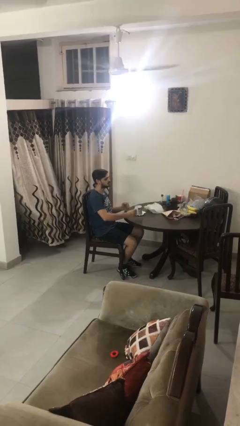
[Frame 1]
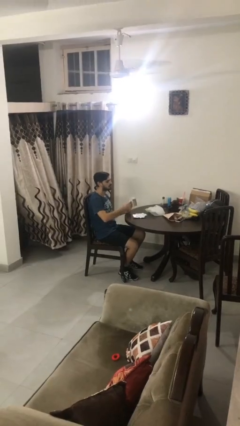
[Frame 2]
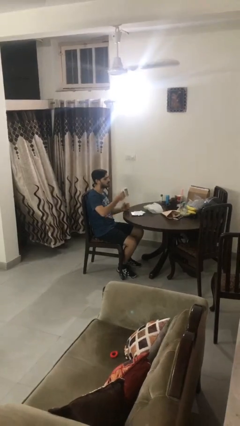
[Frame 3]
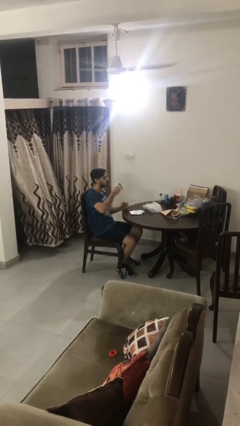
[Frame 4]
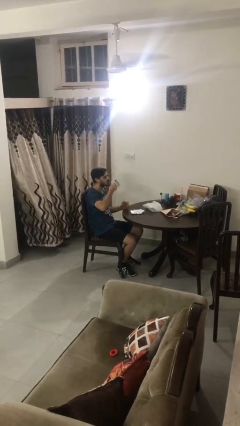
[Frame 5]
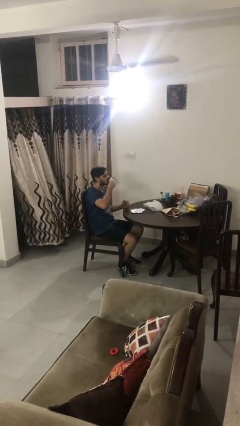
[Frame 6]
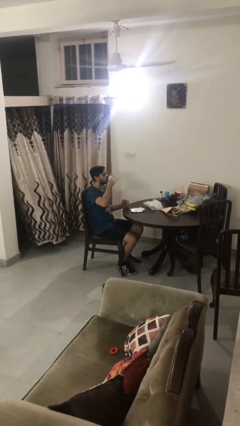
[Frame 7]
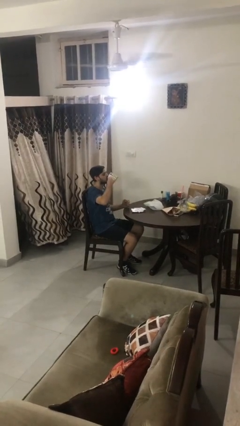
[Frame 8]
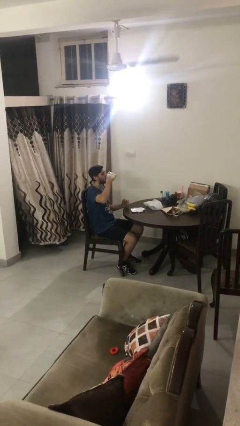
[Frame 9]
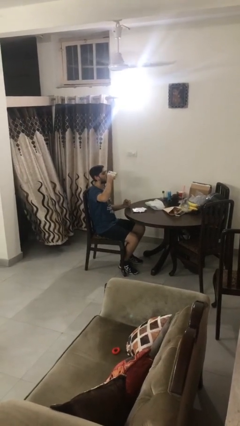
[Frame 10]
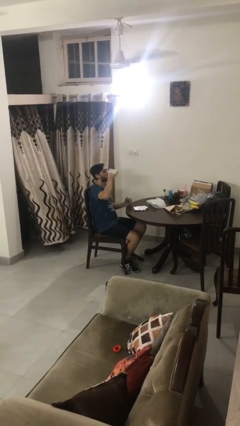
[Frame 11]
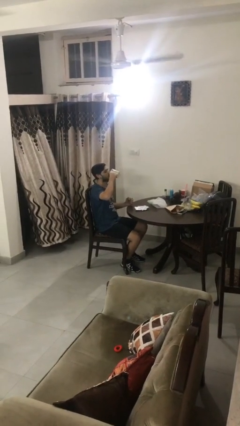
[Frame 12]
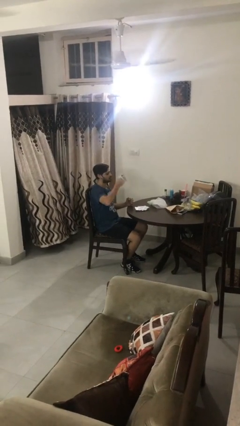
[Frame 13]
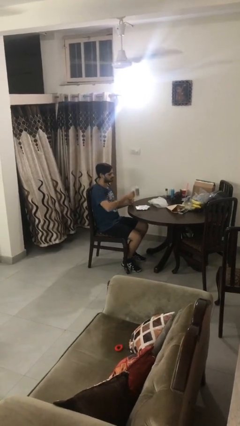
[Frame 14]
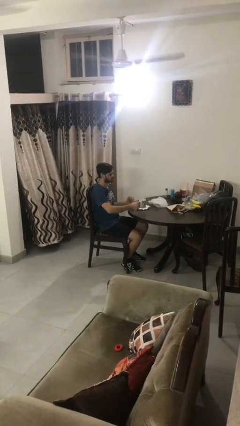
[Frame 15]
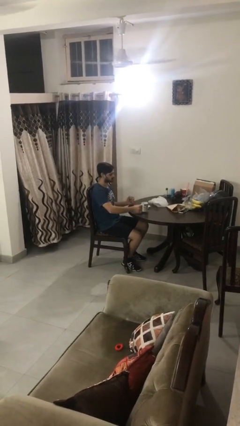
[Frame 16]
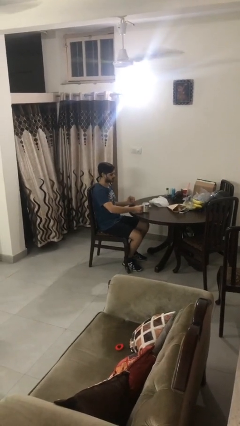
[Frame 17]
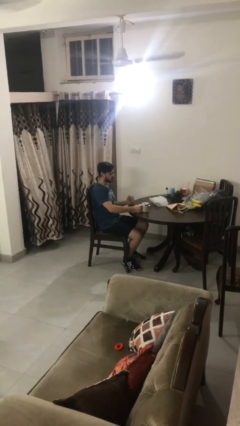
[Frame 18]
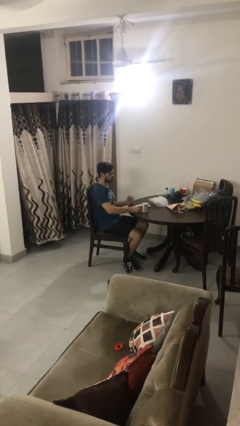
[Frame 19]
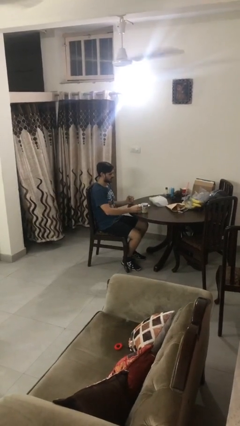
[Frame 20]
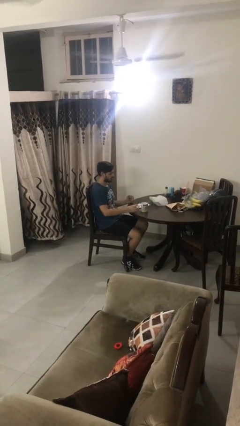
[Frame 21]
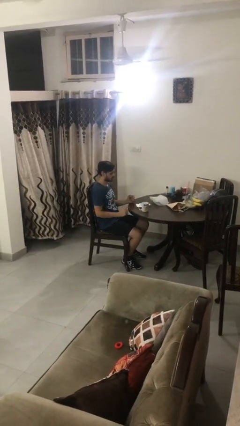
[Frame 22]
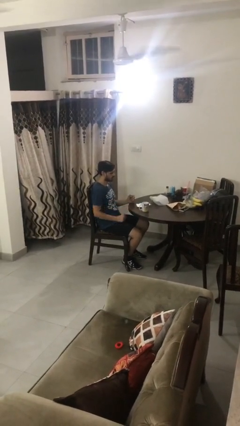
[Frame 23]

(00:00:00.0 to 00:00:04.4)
person drinks from cup

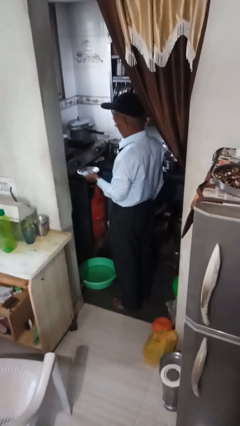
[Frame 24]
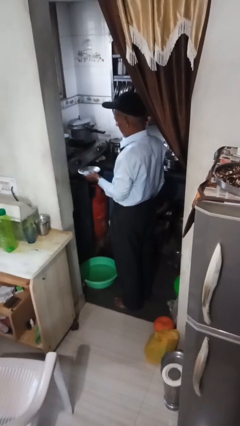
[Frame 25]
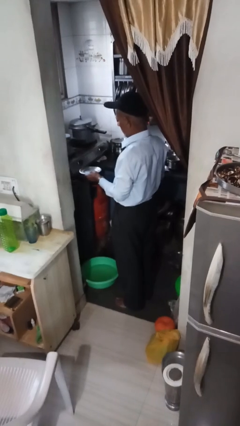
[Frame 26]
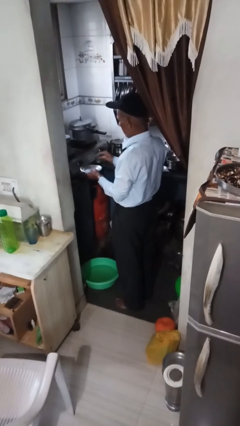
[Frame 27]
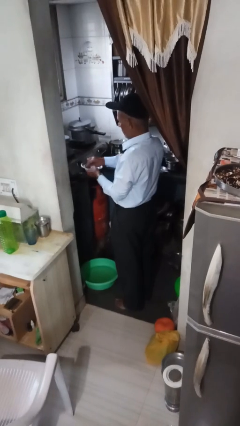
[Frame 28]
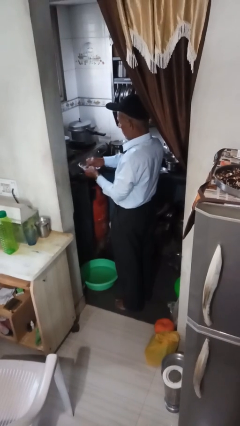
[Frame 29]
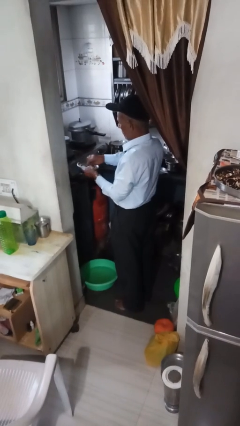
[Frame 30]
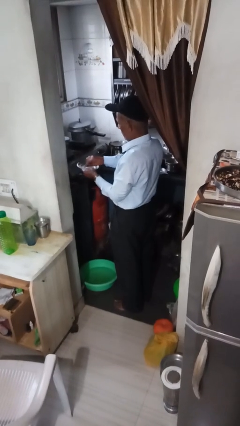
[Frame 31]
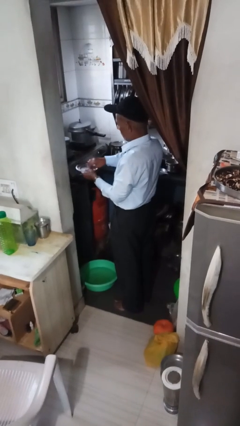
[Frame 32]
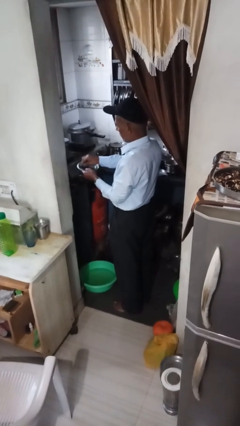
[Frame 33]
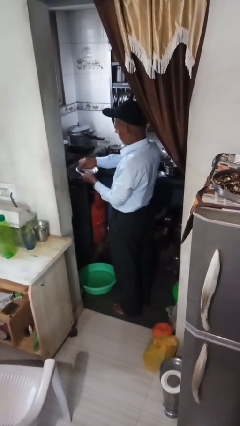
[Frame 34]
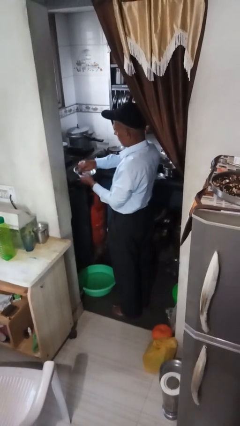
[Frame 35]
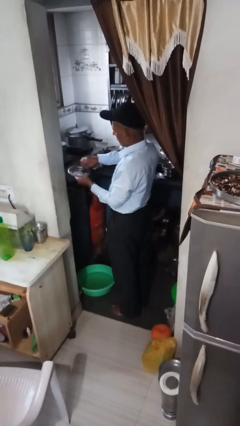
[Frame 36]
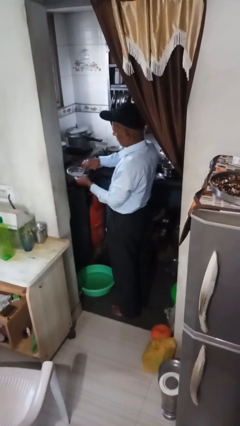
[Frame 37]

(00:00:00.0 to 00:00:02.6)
person washes dish

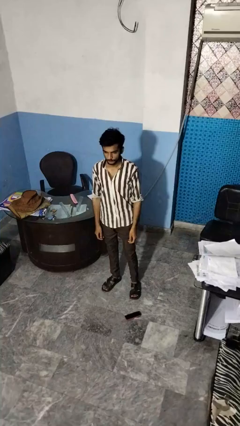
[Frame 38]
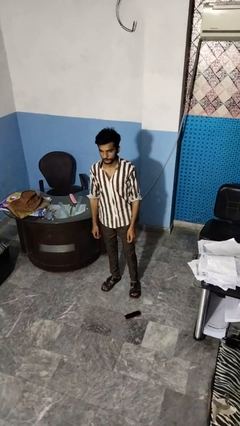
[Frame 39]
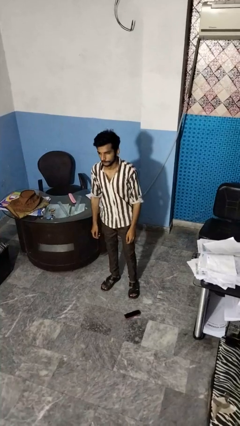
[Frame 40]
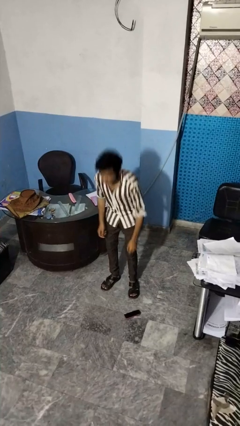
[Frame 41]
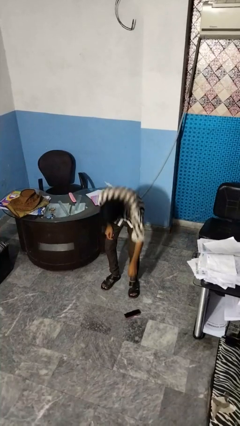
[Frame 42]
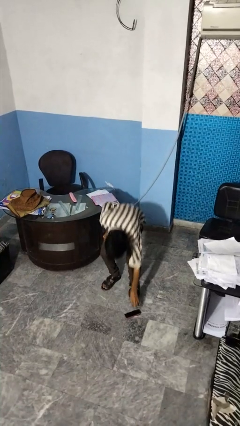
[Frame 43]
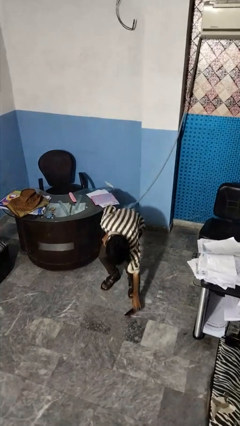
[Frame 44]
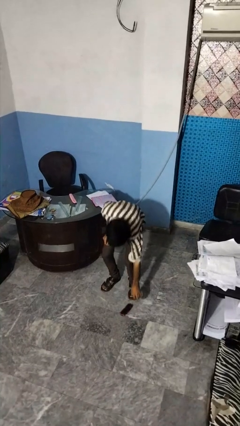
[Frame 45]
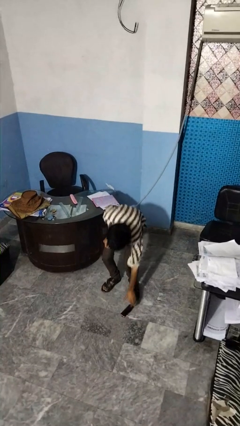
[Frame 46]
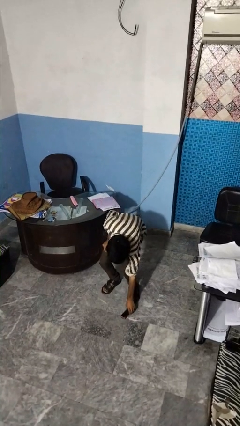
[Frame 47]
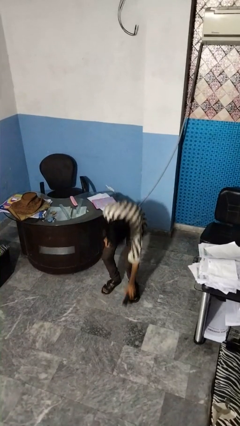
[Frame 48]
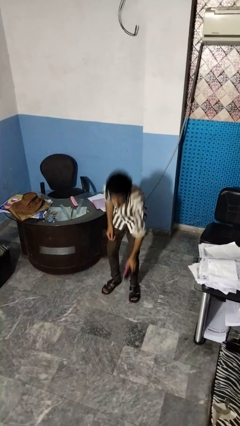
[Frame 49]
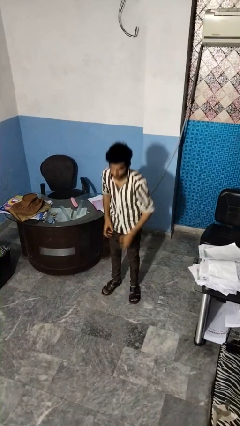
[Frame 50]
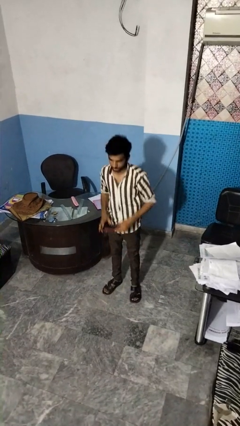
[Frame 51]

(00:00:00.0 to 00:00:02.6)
person picks up object from floor

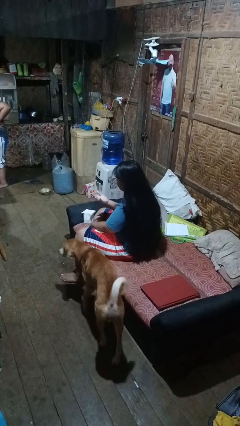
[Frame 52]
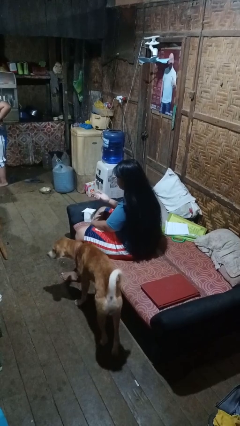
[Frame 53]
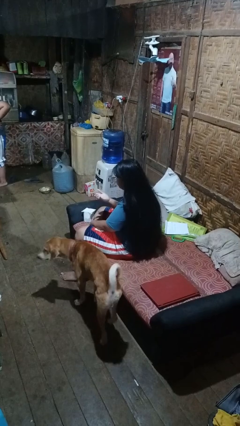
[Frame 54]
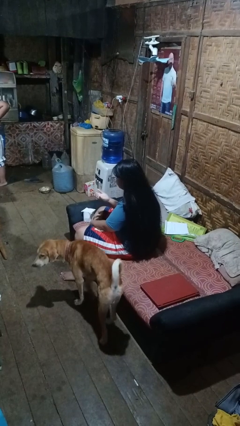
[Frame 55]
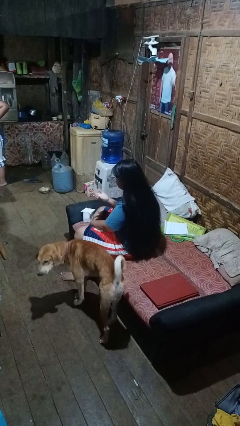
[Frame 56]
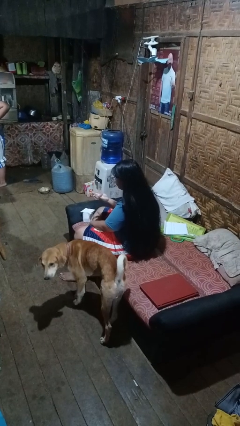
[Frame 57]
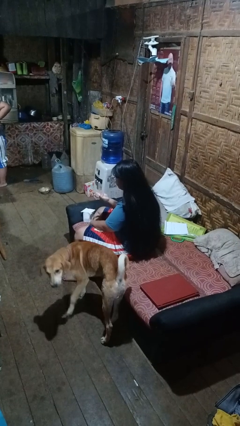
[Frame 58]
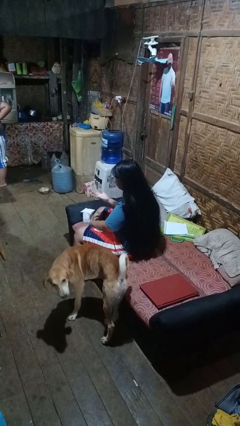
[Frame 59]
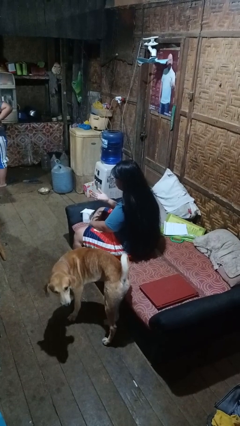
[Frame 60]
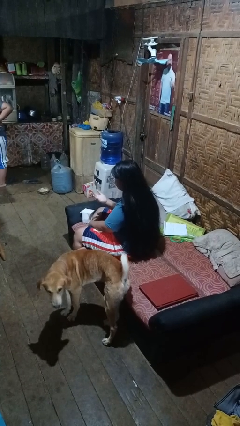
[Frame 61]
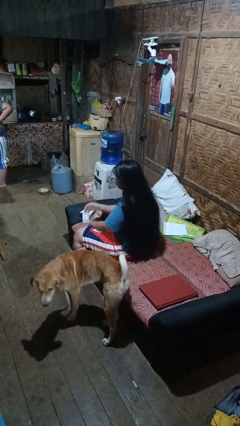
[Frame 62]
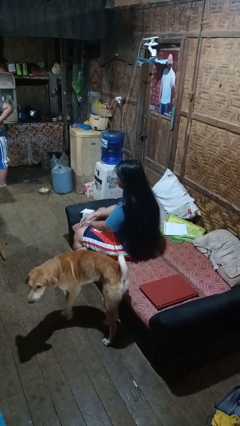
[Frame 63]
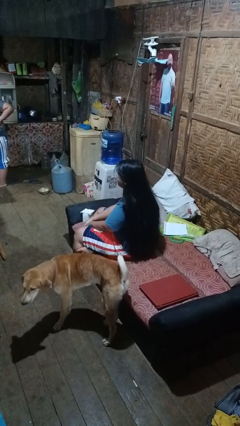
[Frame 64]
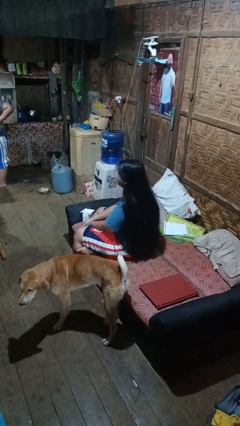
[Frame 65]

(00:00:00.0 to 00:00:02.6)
person looks at hands in lap

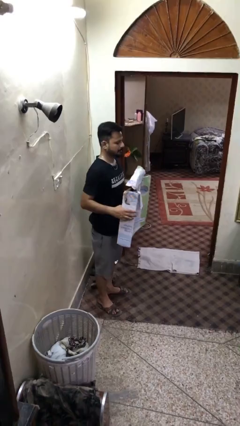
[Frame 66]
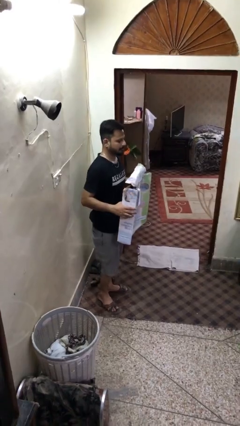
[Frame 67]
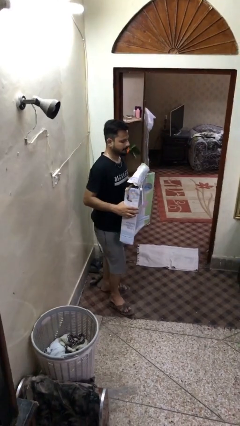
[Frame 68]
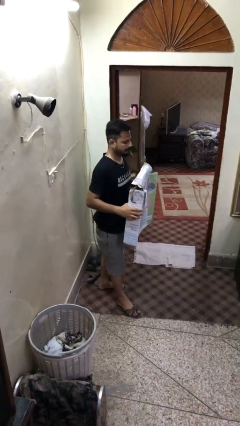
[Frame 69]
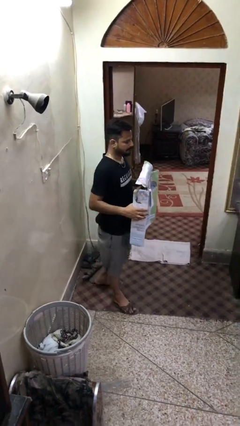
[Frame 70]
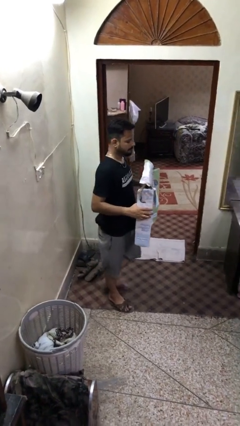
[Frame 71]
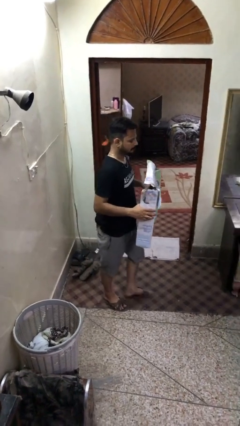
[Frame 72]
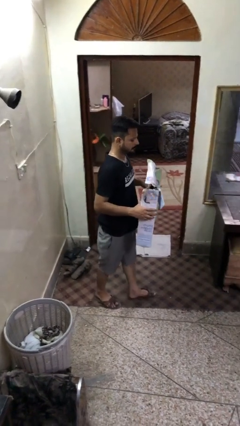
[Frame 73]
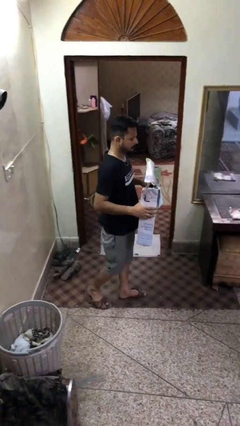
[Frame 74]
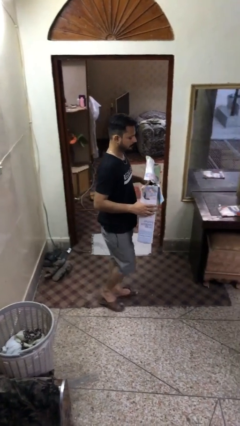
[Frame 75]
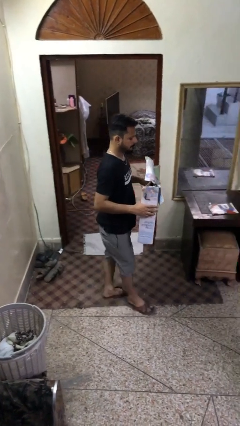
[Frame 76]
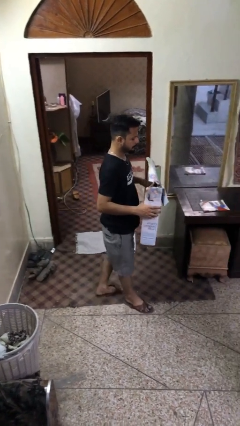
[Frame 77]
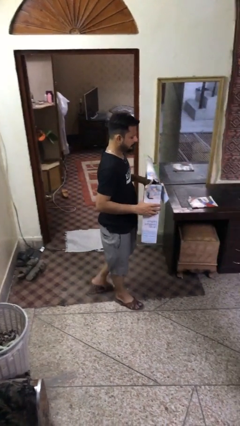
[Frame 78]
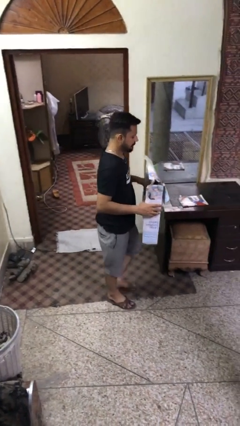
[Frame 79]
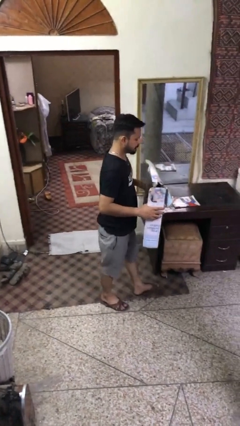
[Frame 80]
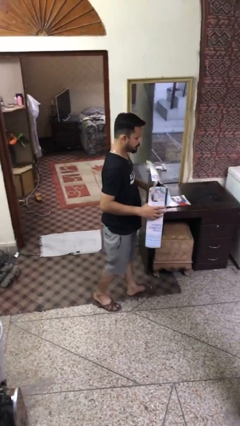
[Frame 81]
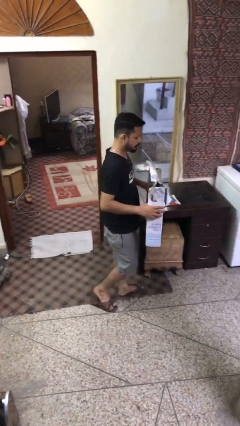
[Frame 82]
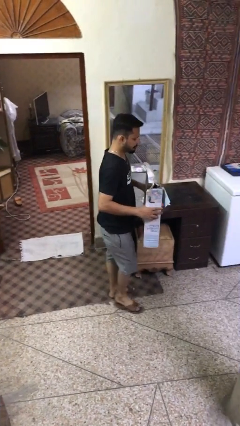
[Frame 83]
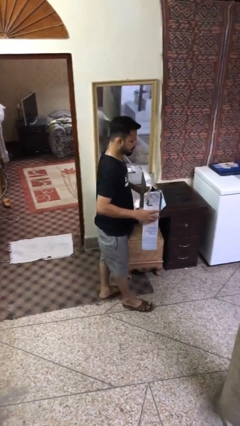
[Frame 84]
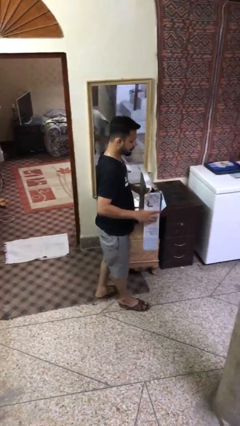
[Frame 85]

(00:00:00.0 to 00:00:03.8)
person carries heavy object

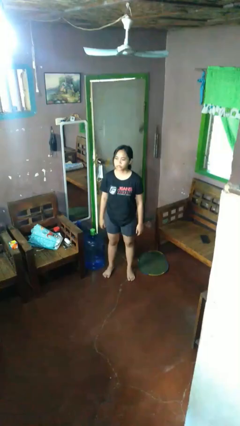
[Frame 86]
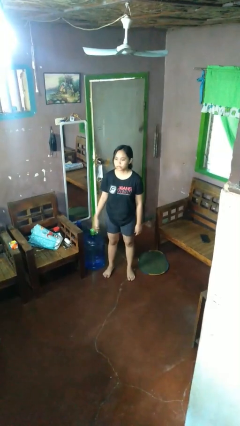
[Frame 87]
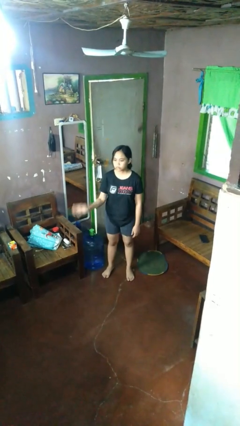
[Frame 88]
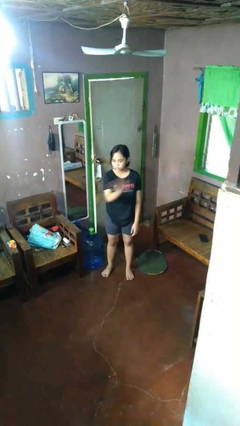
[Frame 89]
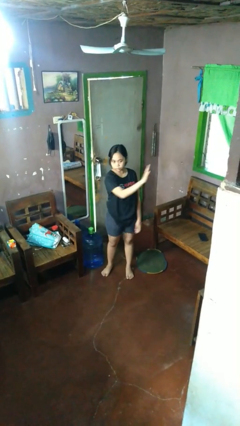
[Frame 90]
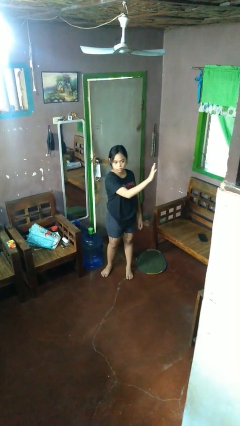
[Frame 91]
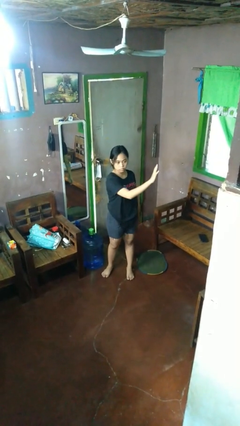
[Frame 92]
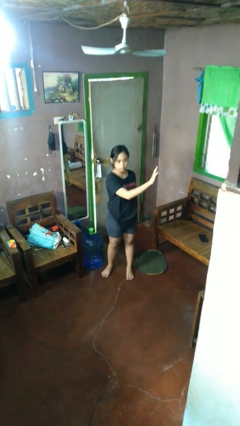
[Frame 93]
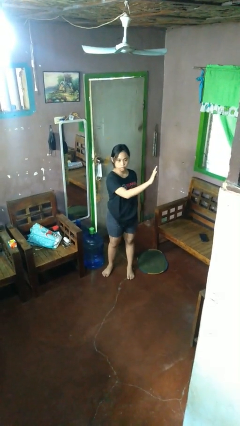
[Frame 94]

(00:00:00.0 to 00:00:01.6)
person gestures swipe left
